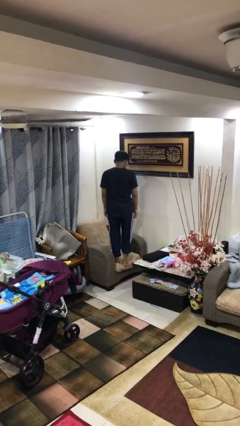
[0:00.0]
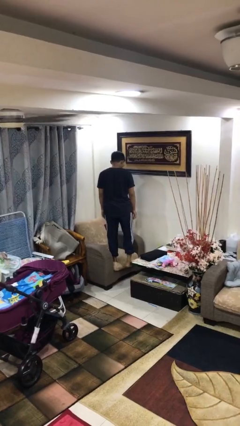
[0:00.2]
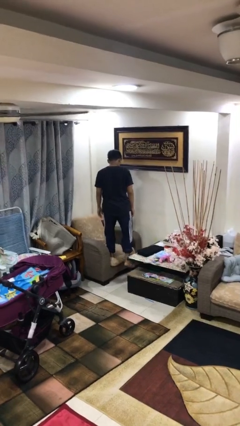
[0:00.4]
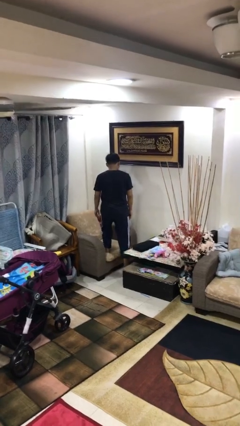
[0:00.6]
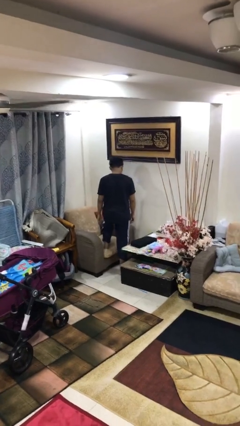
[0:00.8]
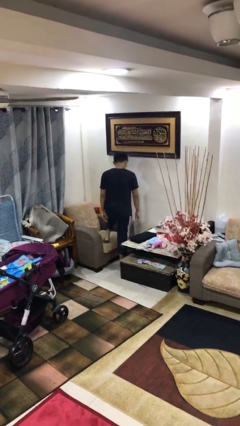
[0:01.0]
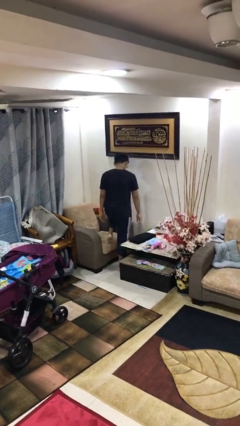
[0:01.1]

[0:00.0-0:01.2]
person climbs off couch

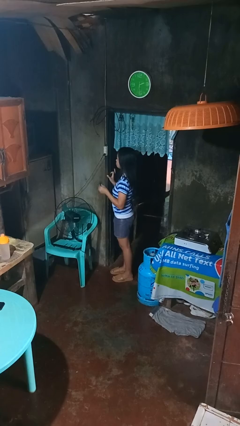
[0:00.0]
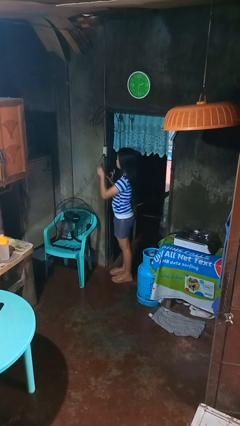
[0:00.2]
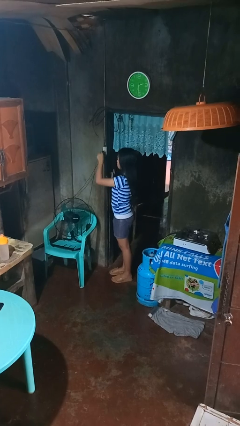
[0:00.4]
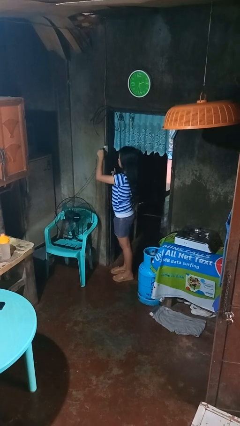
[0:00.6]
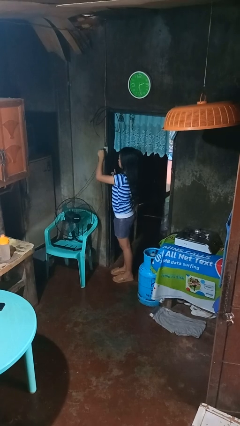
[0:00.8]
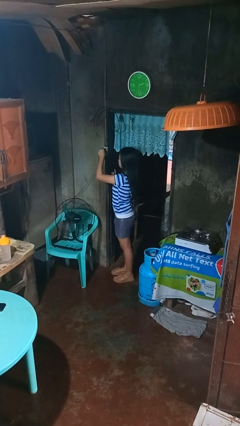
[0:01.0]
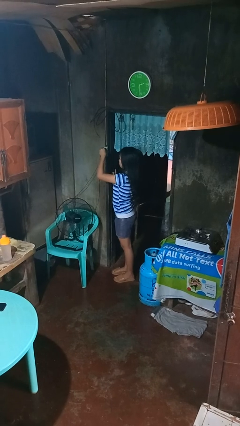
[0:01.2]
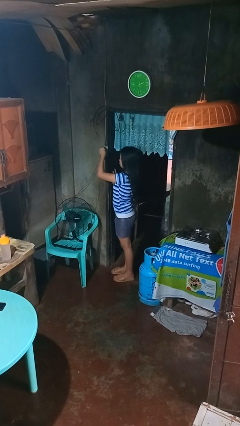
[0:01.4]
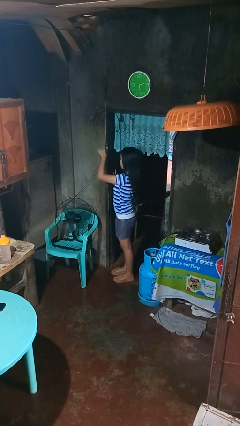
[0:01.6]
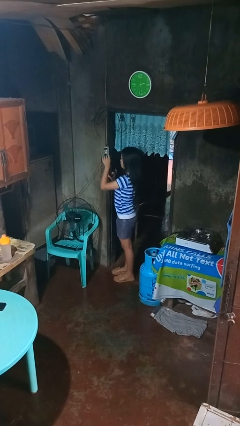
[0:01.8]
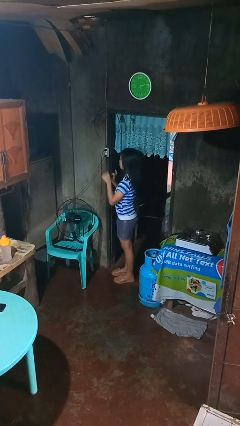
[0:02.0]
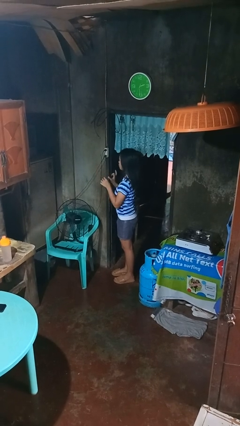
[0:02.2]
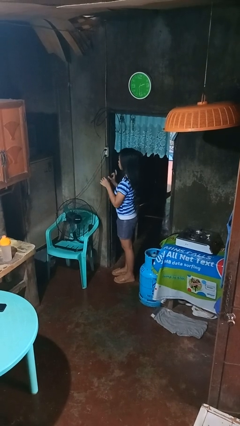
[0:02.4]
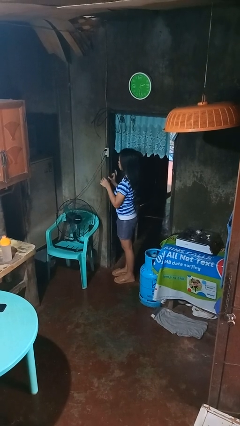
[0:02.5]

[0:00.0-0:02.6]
person plugs into electrical socket

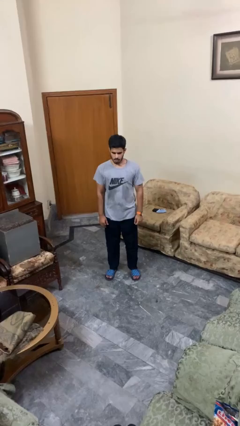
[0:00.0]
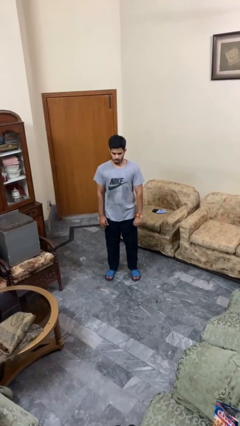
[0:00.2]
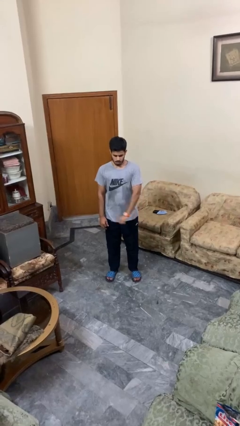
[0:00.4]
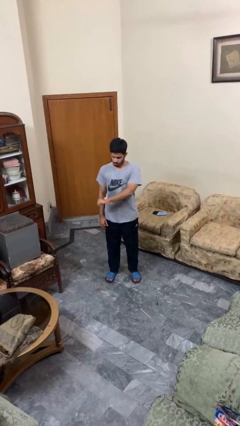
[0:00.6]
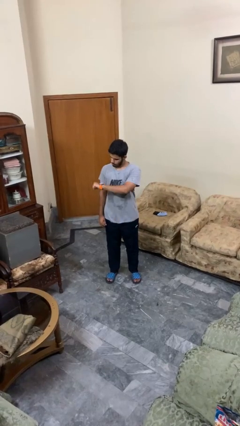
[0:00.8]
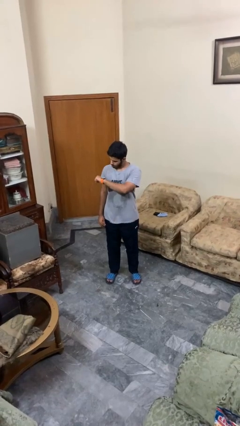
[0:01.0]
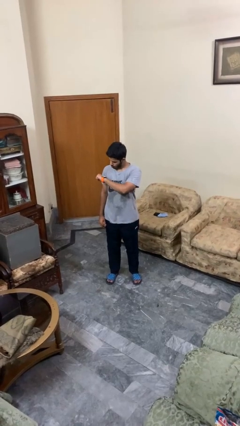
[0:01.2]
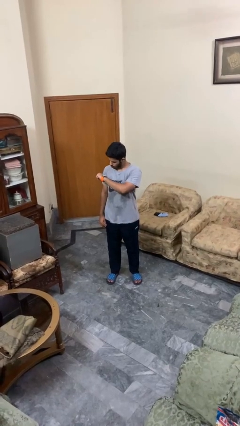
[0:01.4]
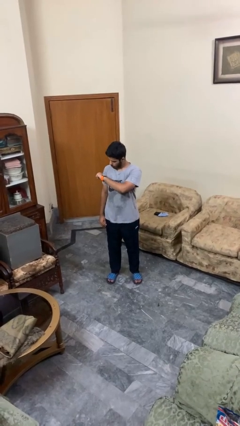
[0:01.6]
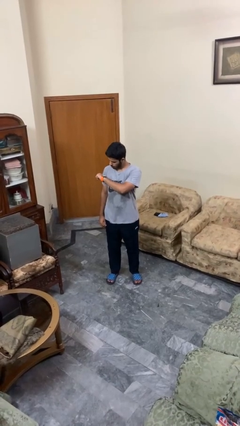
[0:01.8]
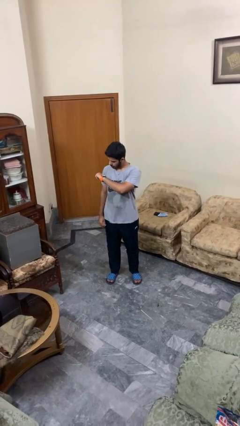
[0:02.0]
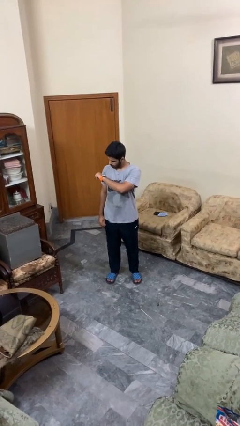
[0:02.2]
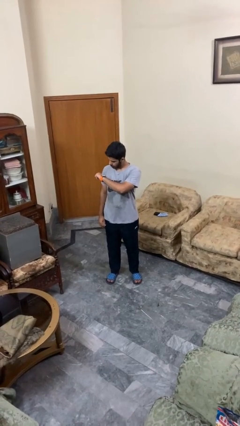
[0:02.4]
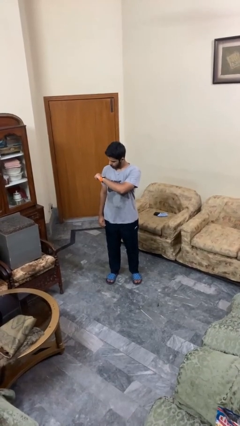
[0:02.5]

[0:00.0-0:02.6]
person looks at wristwatch

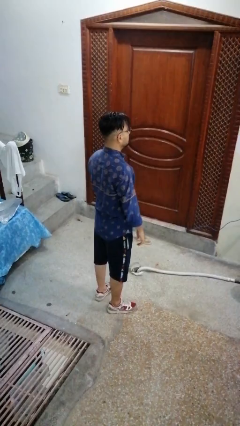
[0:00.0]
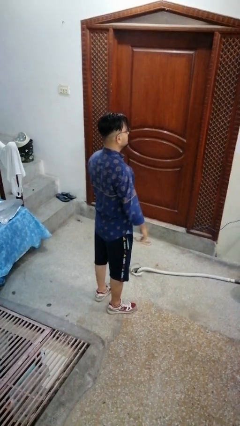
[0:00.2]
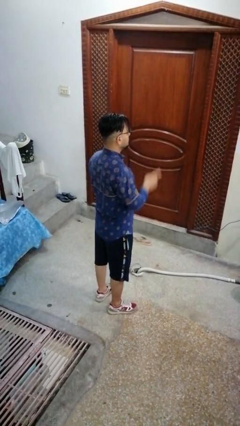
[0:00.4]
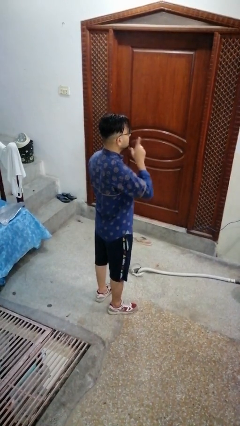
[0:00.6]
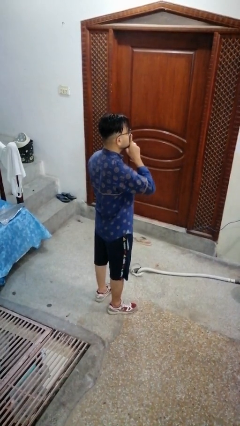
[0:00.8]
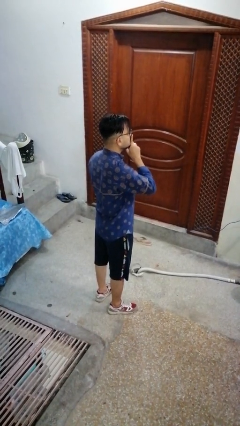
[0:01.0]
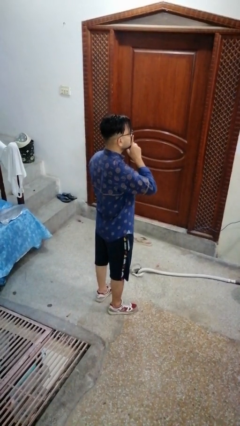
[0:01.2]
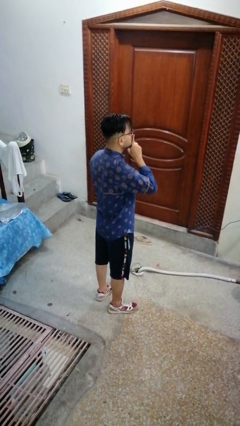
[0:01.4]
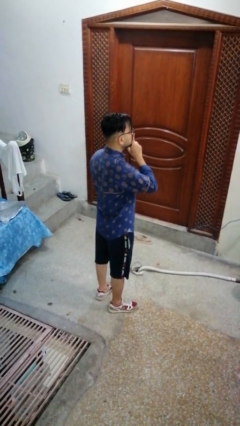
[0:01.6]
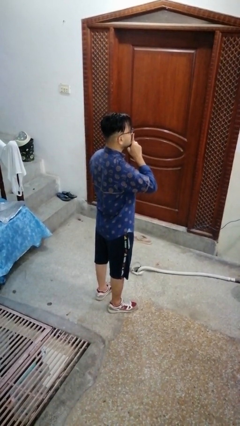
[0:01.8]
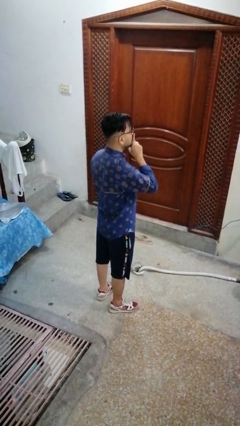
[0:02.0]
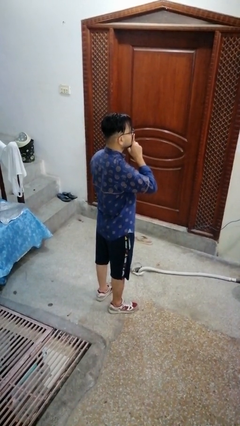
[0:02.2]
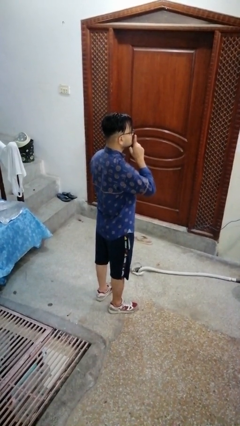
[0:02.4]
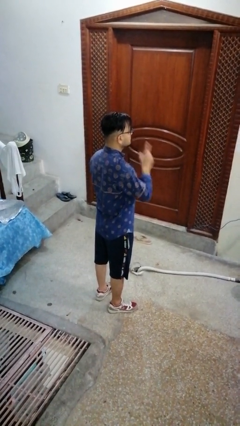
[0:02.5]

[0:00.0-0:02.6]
person gestures be quiet

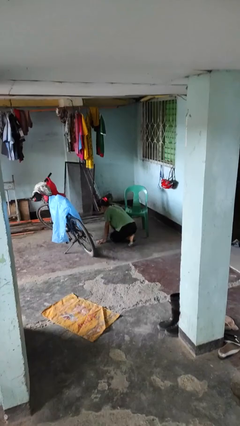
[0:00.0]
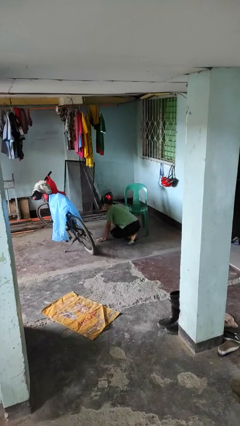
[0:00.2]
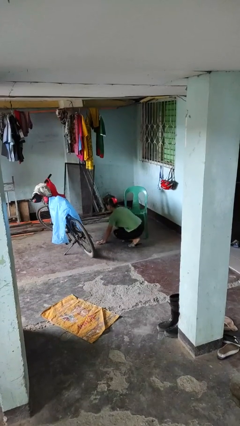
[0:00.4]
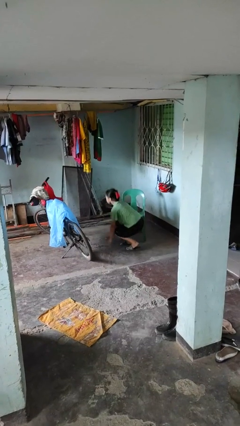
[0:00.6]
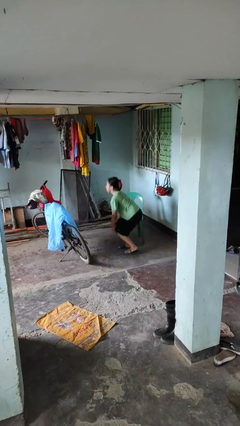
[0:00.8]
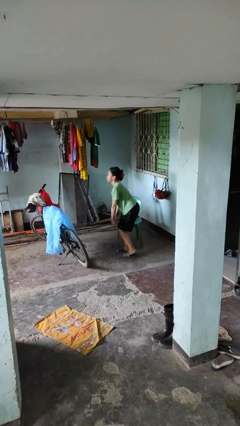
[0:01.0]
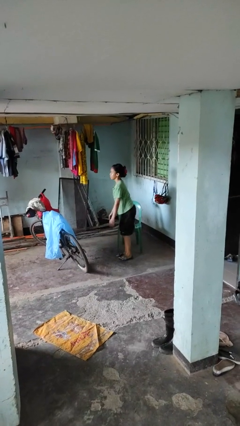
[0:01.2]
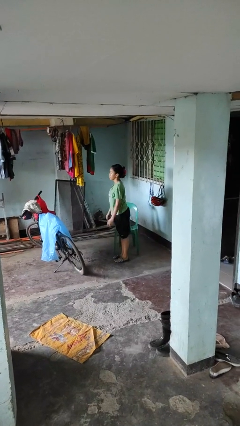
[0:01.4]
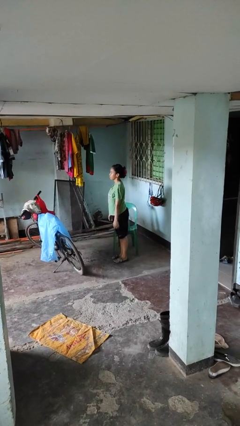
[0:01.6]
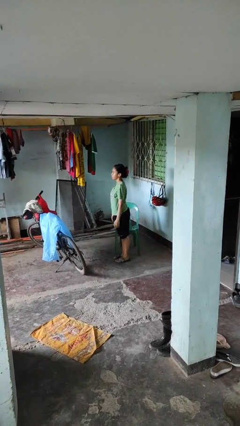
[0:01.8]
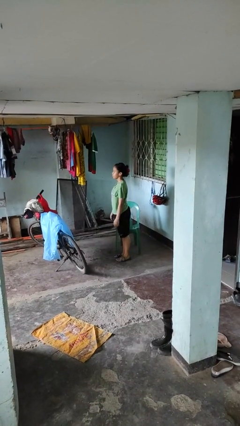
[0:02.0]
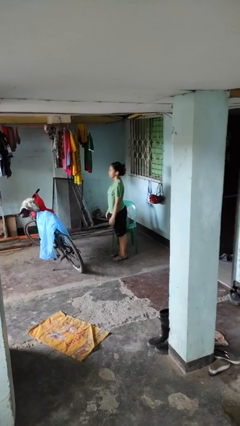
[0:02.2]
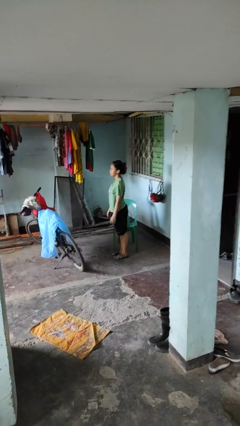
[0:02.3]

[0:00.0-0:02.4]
person stands up from floor

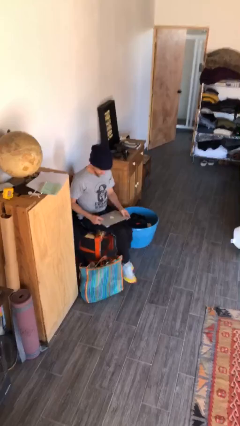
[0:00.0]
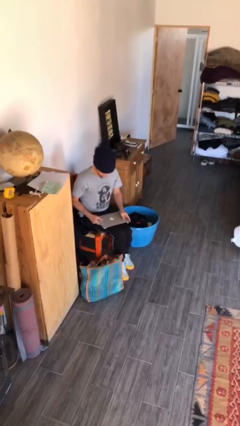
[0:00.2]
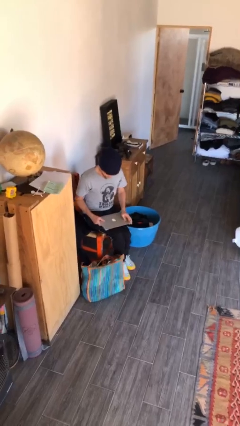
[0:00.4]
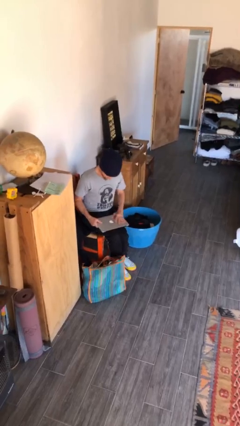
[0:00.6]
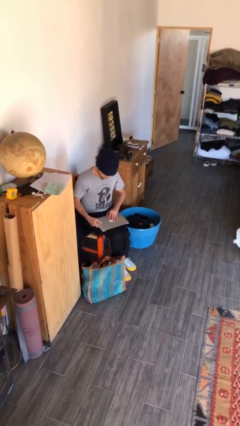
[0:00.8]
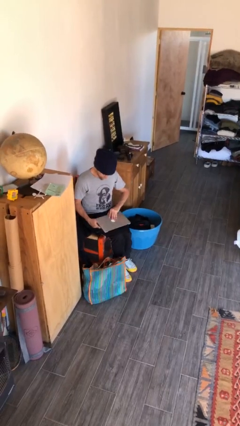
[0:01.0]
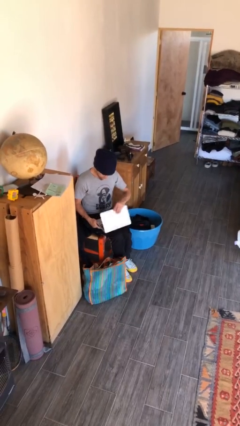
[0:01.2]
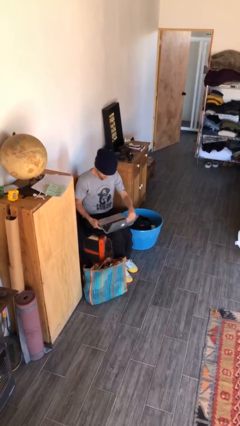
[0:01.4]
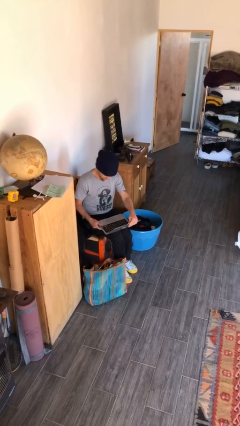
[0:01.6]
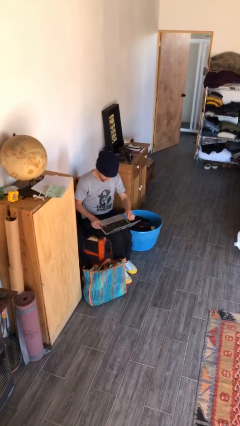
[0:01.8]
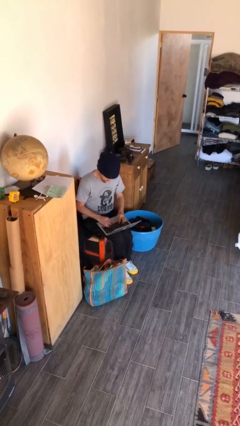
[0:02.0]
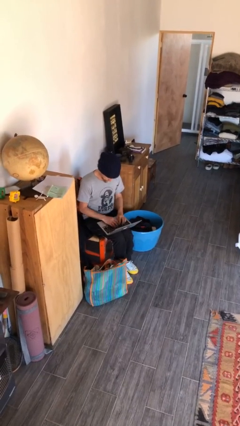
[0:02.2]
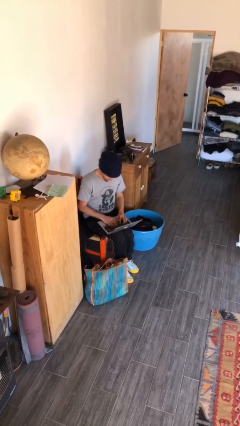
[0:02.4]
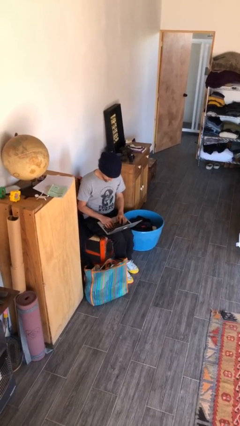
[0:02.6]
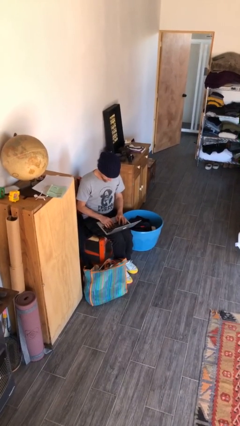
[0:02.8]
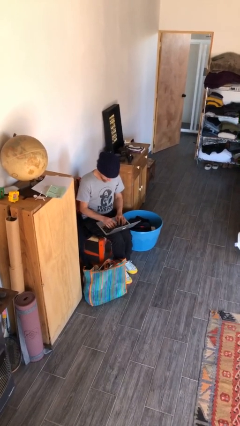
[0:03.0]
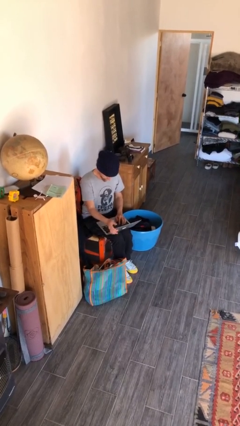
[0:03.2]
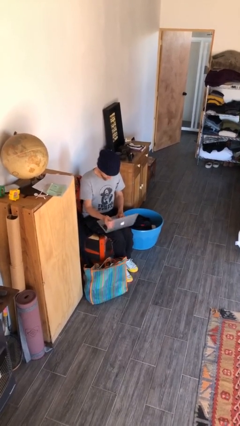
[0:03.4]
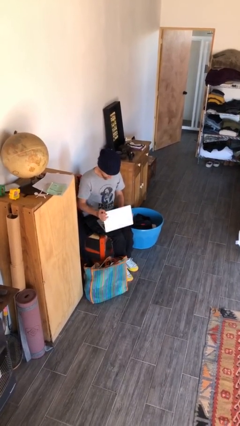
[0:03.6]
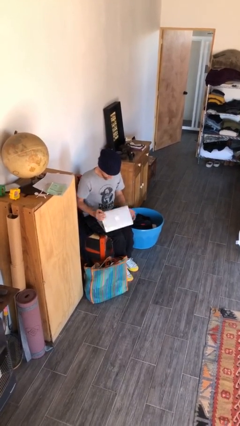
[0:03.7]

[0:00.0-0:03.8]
person interacts with laptop

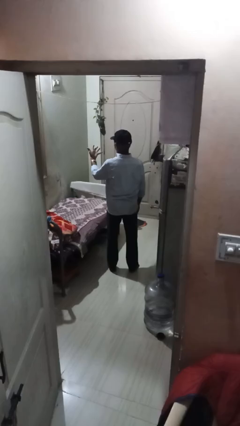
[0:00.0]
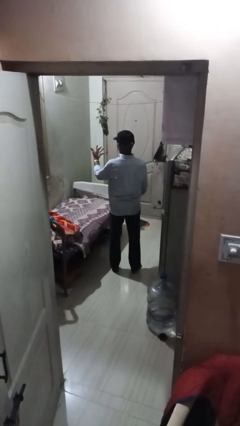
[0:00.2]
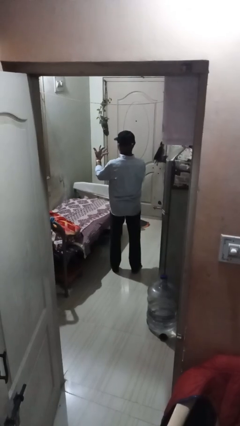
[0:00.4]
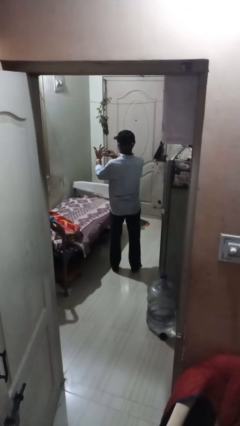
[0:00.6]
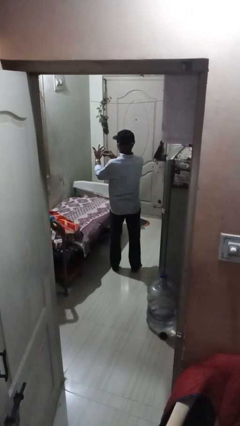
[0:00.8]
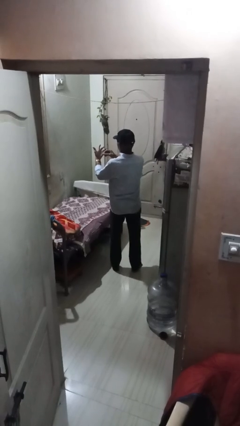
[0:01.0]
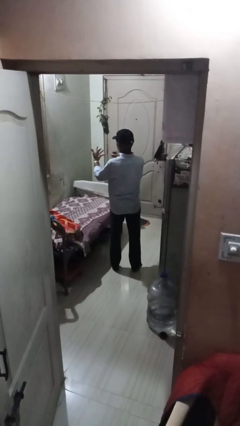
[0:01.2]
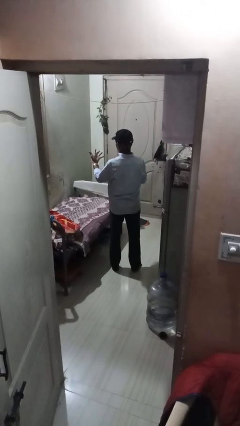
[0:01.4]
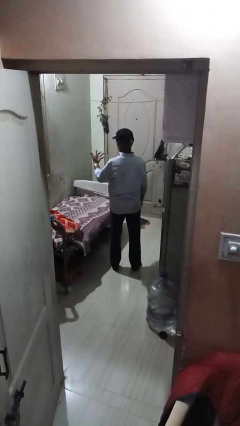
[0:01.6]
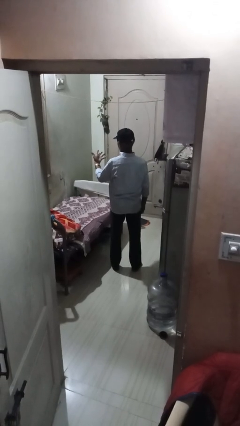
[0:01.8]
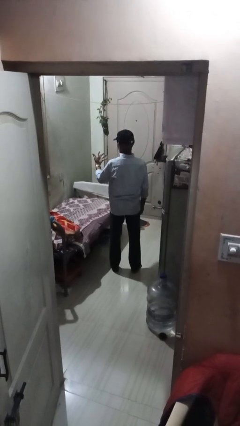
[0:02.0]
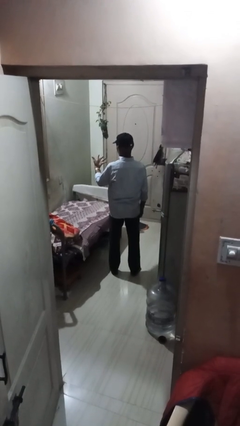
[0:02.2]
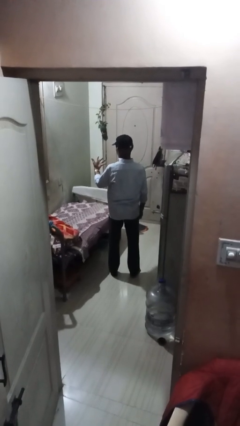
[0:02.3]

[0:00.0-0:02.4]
person takes off ring
